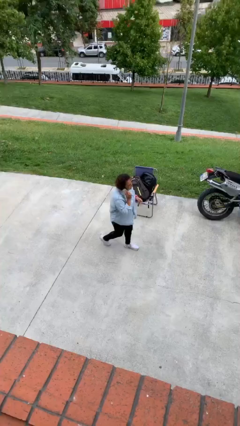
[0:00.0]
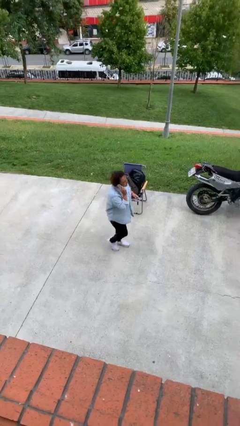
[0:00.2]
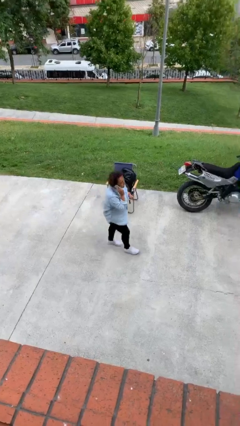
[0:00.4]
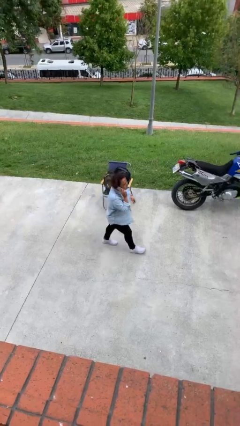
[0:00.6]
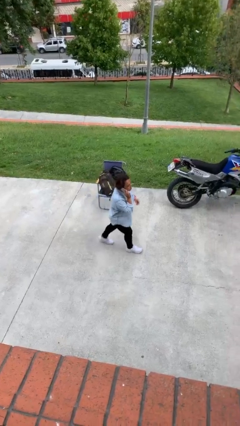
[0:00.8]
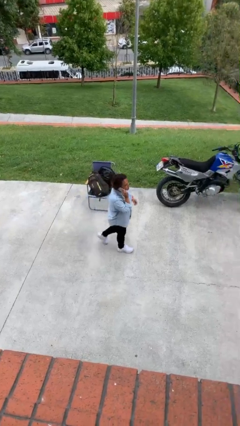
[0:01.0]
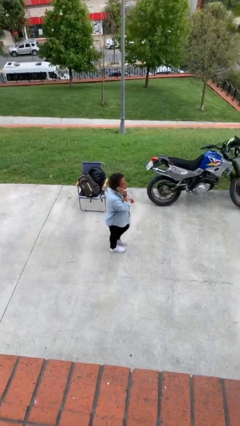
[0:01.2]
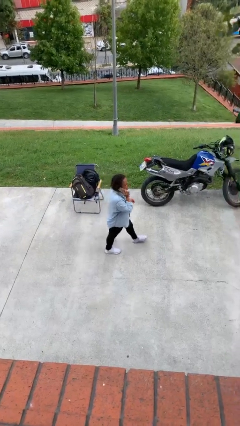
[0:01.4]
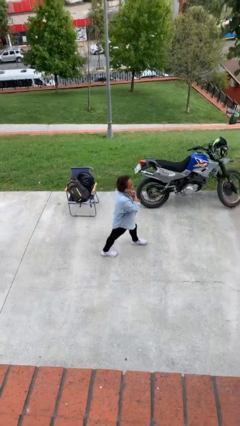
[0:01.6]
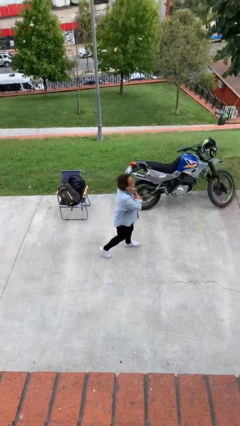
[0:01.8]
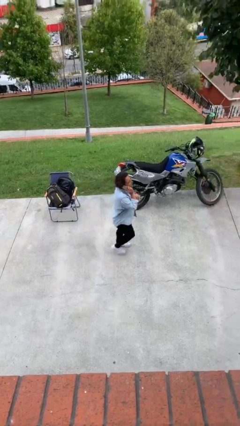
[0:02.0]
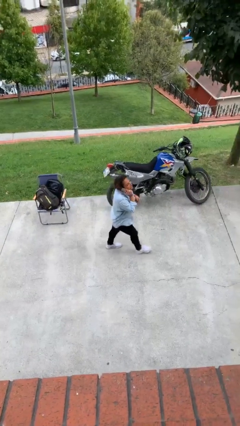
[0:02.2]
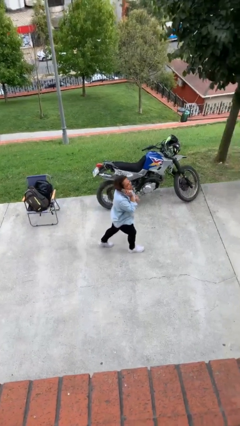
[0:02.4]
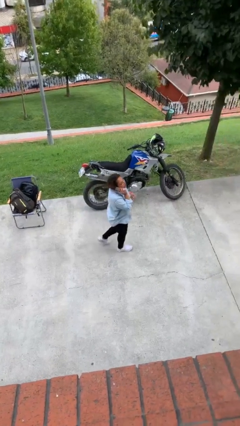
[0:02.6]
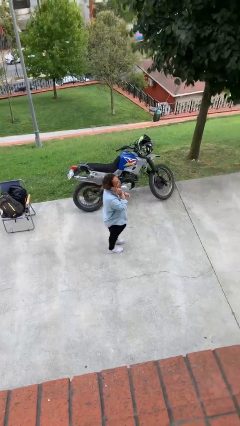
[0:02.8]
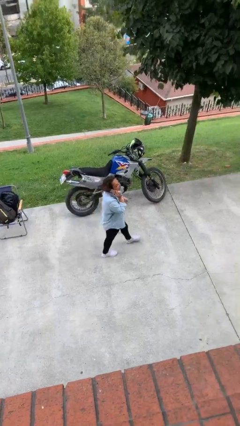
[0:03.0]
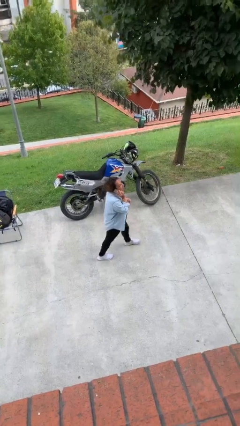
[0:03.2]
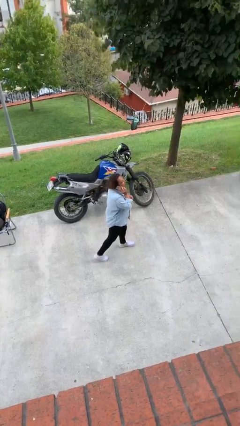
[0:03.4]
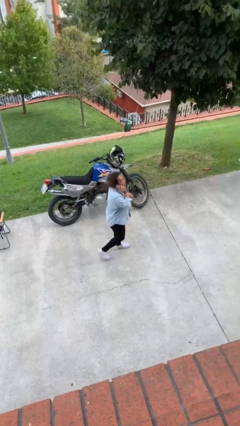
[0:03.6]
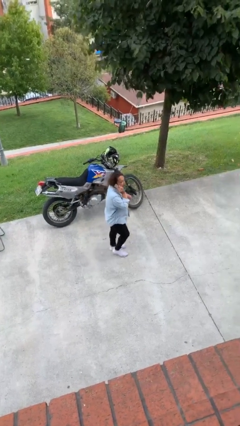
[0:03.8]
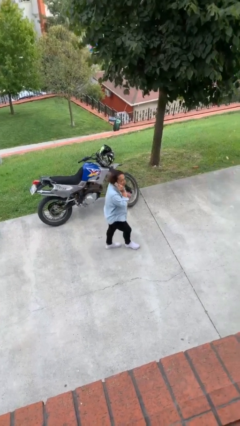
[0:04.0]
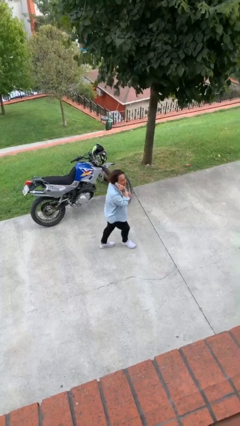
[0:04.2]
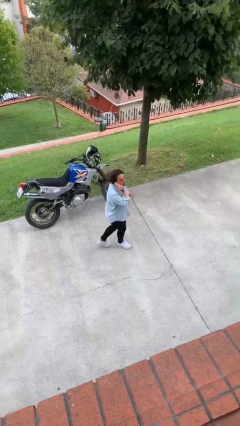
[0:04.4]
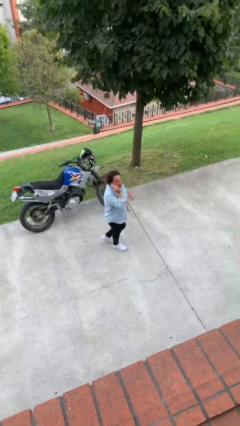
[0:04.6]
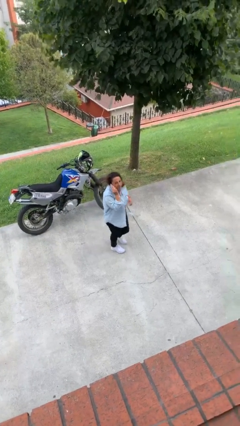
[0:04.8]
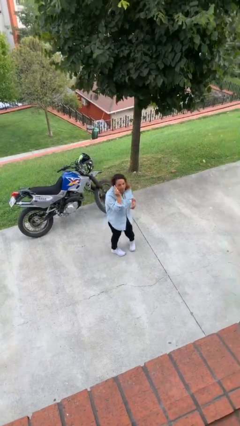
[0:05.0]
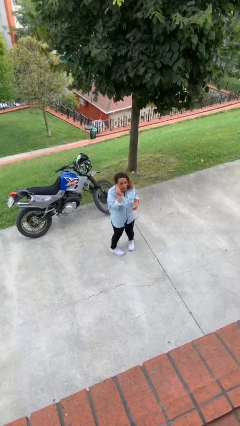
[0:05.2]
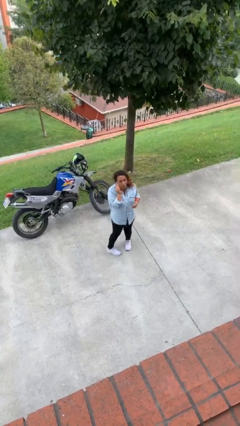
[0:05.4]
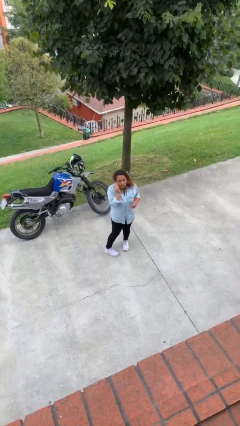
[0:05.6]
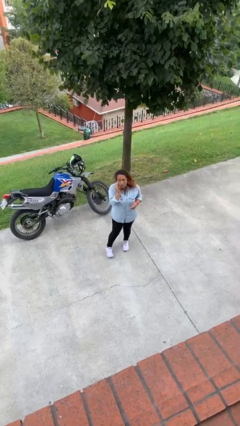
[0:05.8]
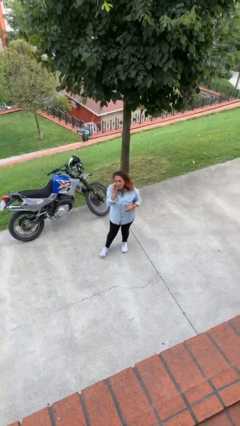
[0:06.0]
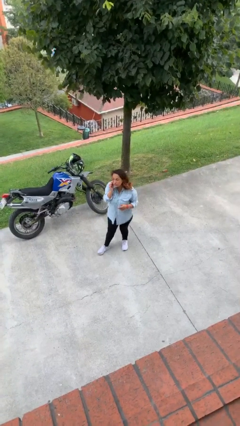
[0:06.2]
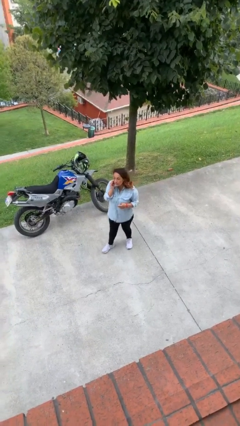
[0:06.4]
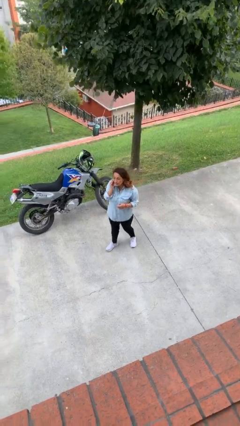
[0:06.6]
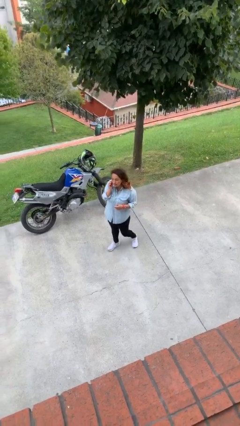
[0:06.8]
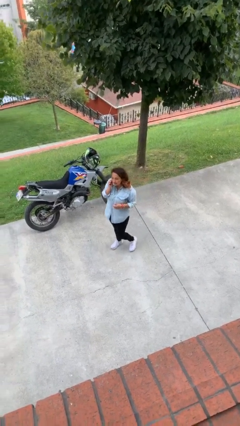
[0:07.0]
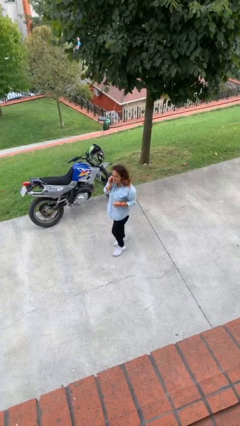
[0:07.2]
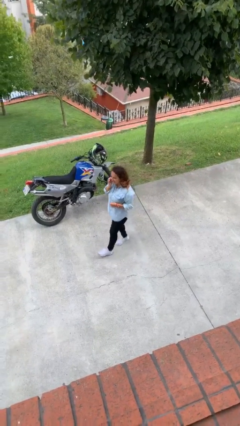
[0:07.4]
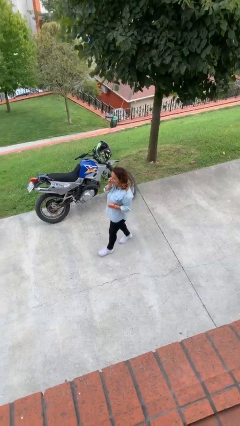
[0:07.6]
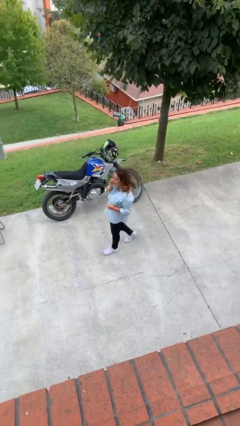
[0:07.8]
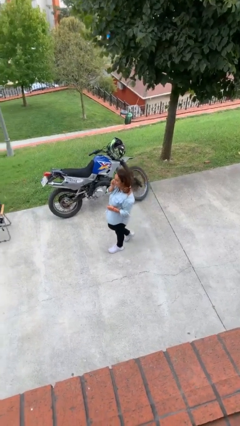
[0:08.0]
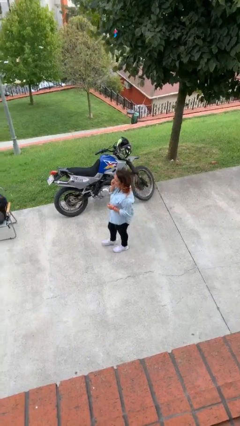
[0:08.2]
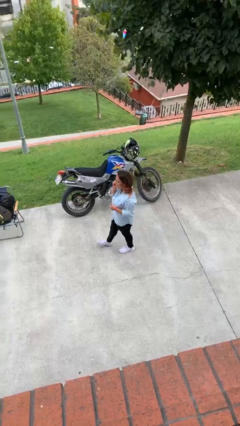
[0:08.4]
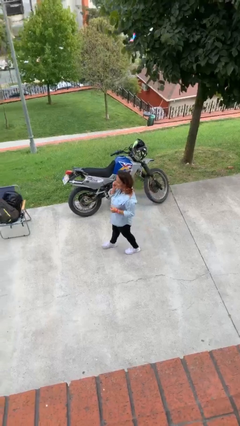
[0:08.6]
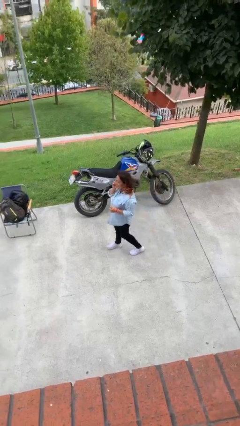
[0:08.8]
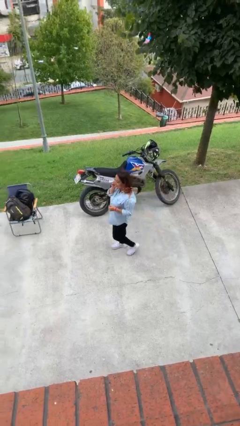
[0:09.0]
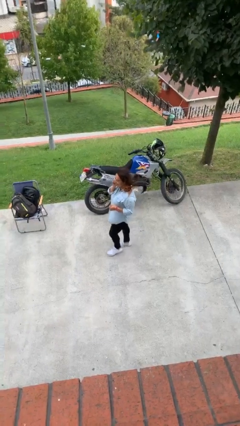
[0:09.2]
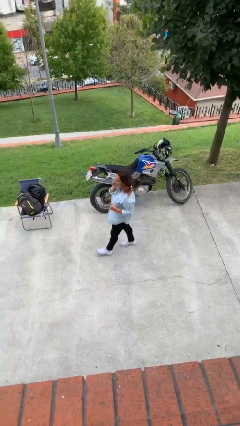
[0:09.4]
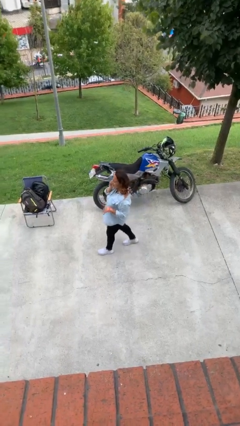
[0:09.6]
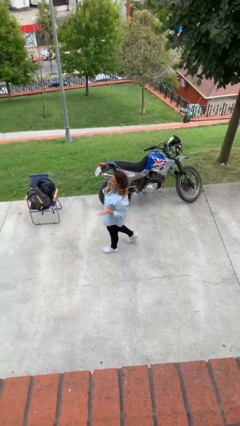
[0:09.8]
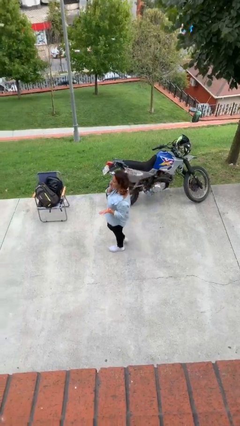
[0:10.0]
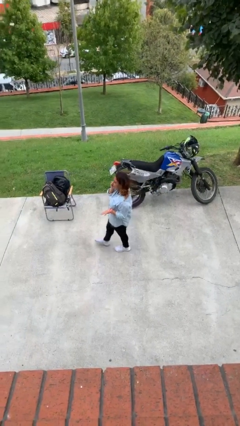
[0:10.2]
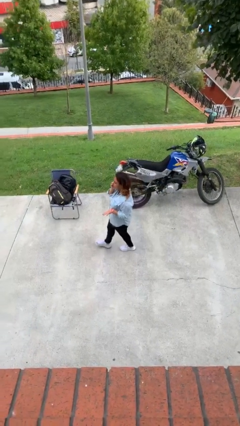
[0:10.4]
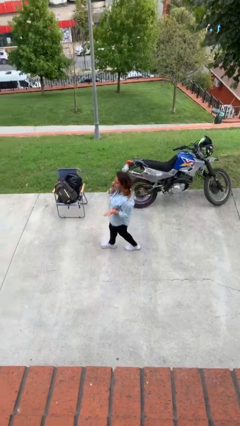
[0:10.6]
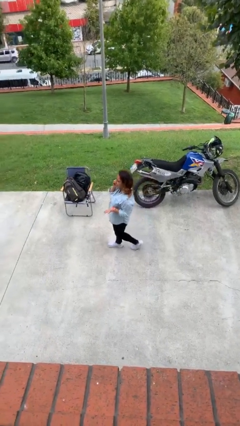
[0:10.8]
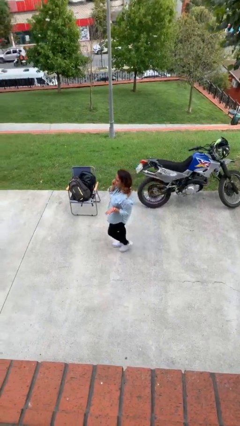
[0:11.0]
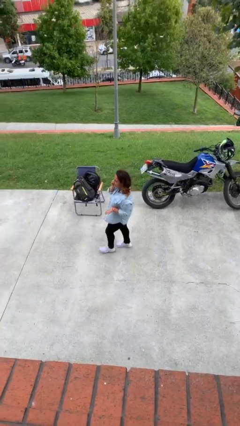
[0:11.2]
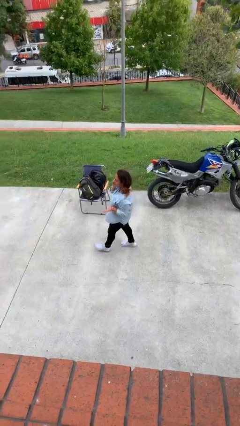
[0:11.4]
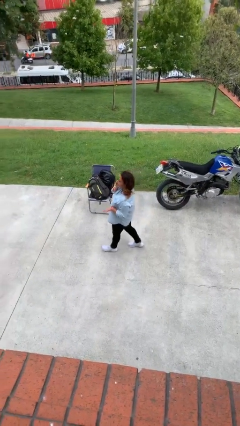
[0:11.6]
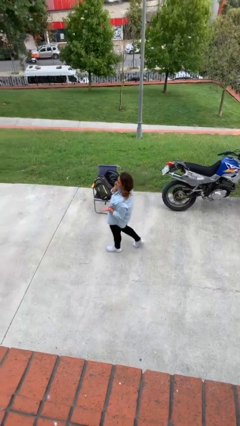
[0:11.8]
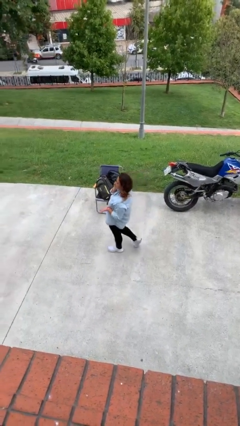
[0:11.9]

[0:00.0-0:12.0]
person talks on phone

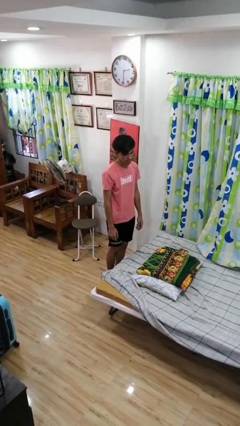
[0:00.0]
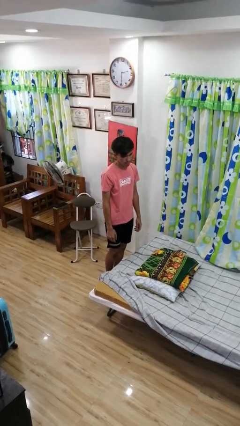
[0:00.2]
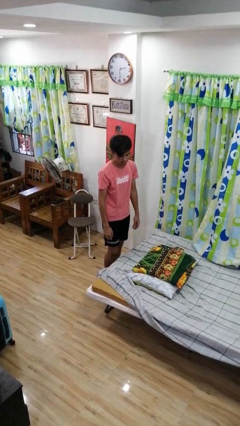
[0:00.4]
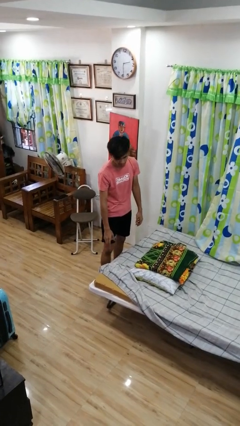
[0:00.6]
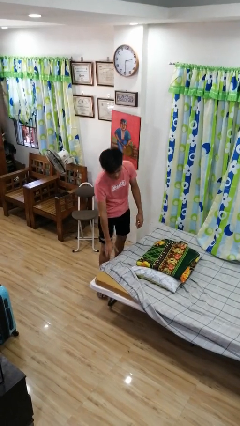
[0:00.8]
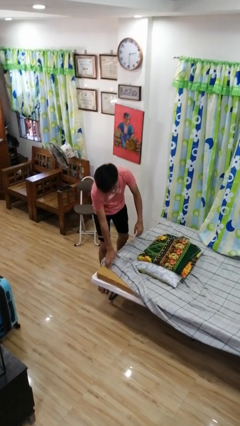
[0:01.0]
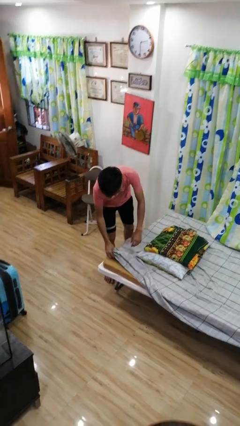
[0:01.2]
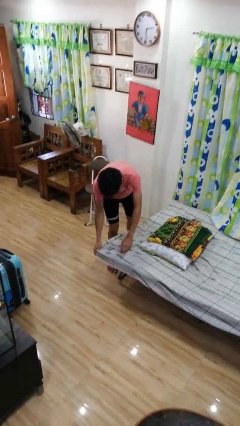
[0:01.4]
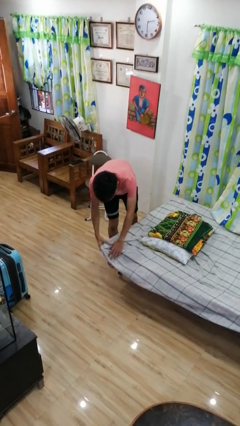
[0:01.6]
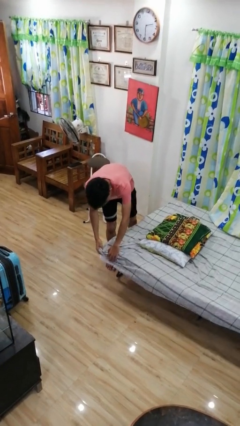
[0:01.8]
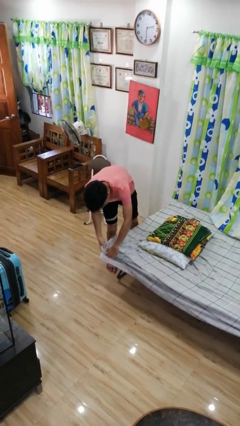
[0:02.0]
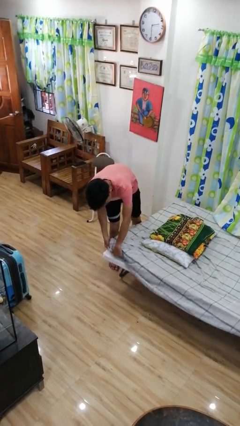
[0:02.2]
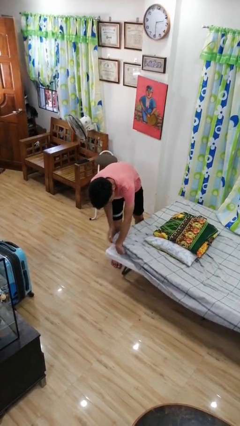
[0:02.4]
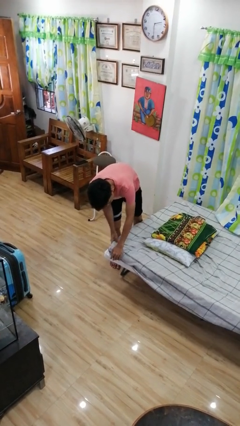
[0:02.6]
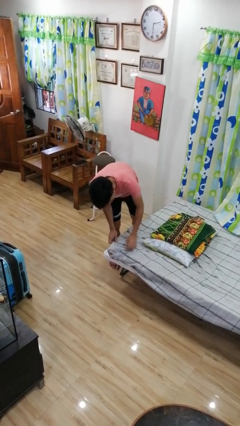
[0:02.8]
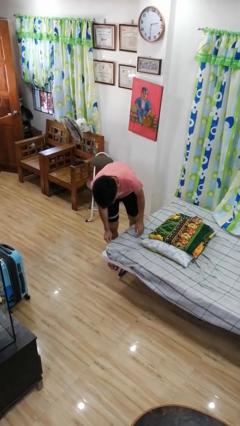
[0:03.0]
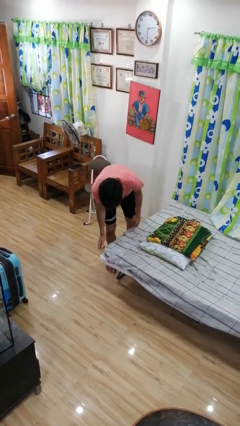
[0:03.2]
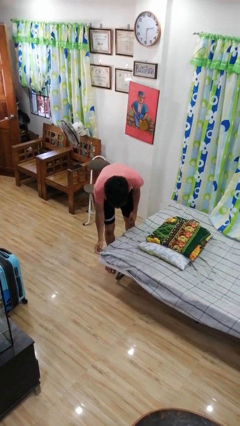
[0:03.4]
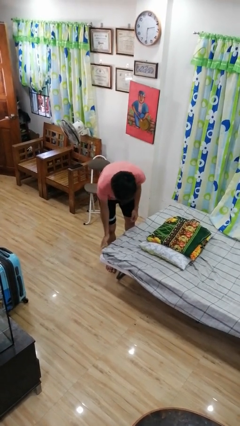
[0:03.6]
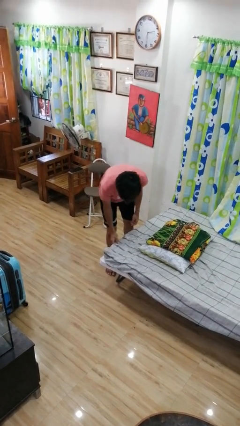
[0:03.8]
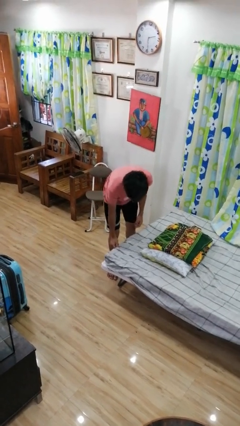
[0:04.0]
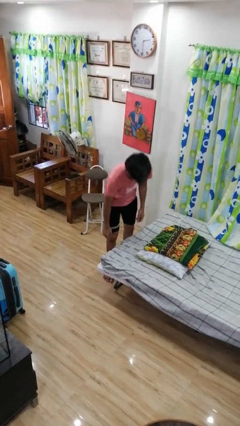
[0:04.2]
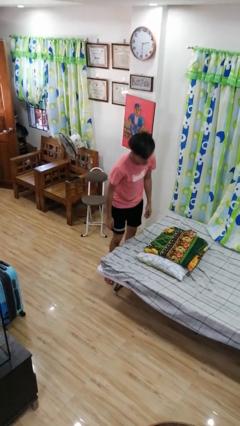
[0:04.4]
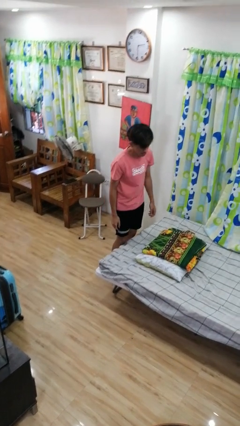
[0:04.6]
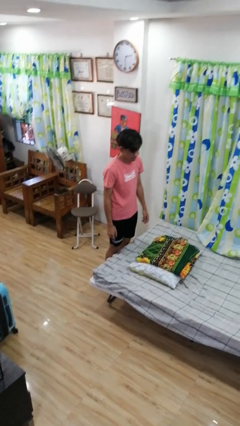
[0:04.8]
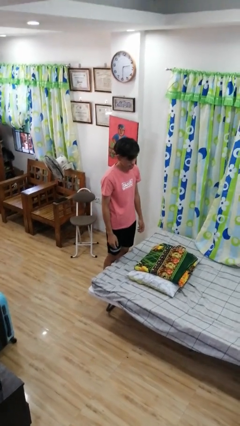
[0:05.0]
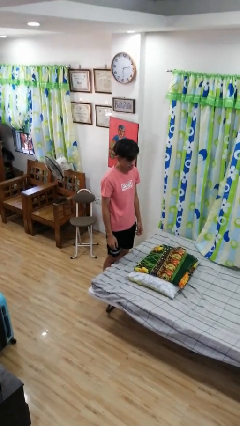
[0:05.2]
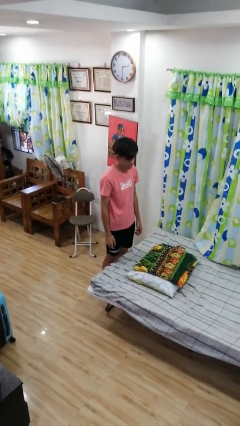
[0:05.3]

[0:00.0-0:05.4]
person makes bed

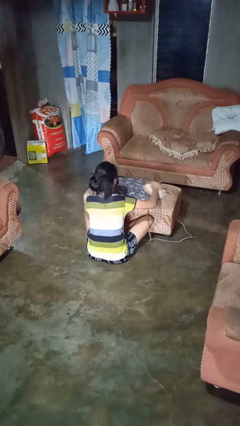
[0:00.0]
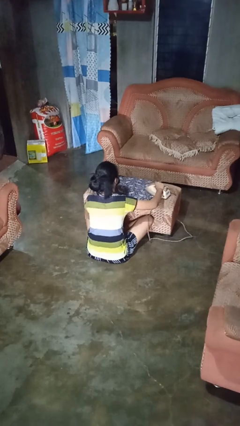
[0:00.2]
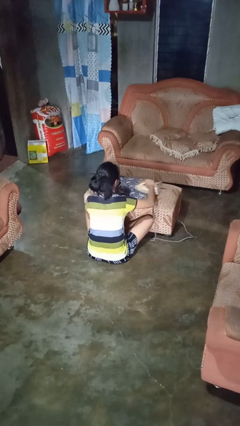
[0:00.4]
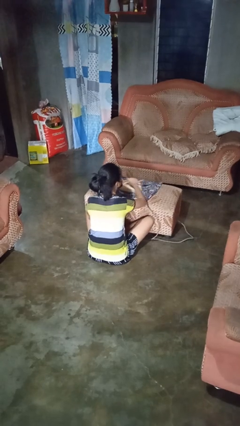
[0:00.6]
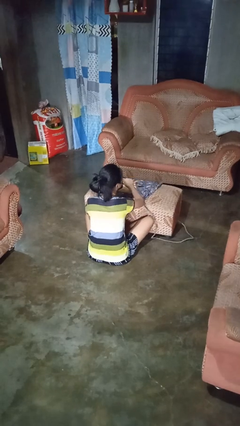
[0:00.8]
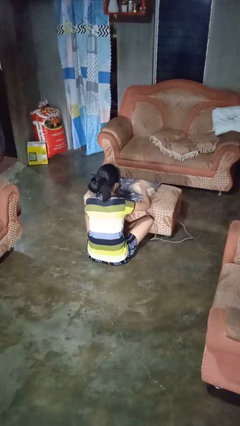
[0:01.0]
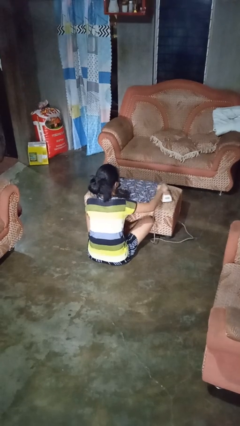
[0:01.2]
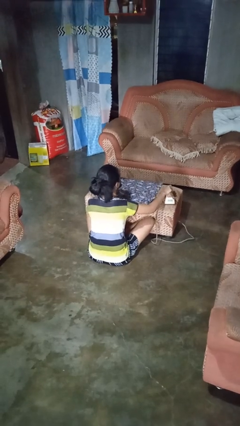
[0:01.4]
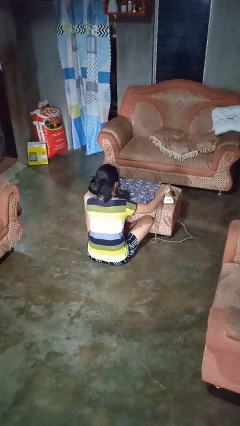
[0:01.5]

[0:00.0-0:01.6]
person irons clothes
